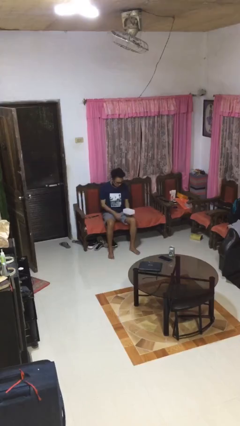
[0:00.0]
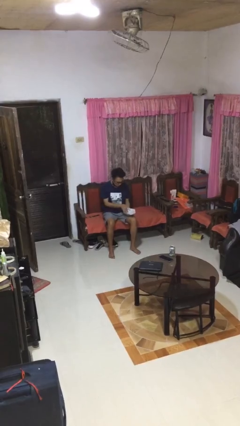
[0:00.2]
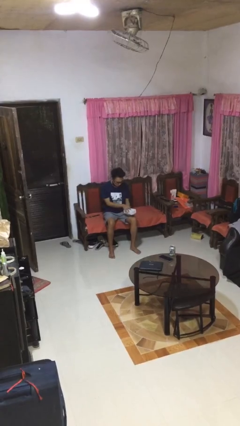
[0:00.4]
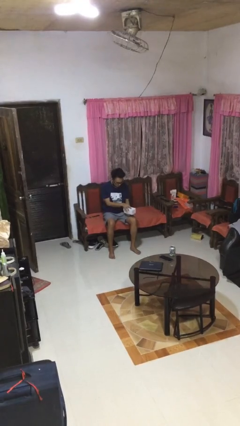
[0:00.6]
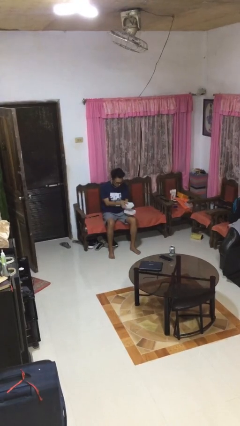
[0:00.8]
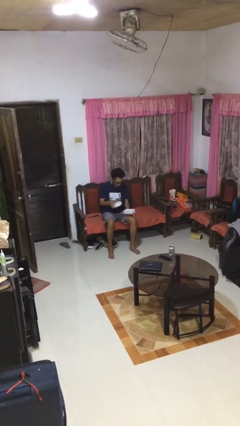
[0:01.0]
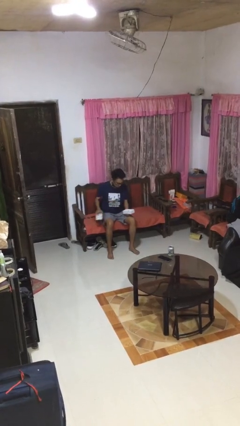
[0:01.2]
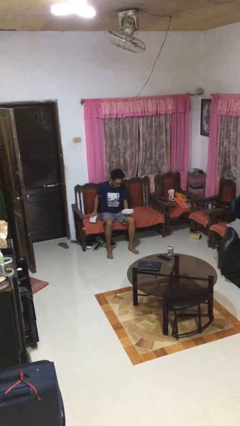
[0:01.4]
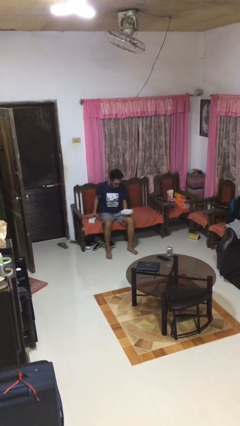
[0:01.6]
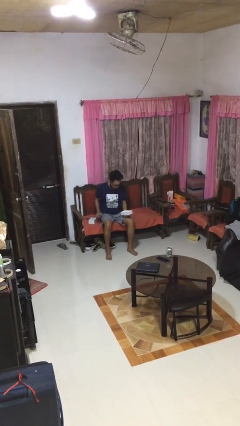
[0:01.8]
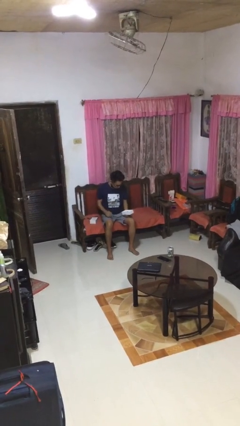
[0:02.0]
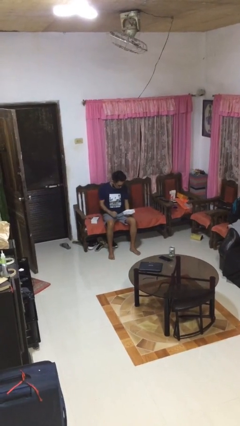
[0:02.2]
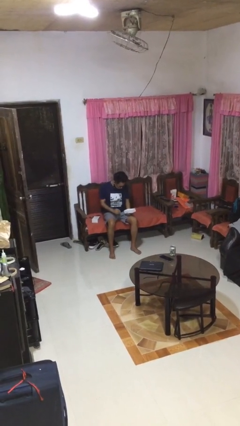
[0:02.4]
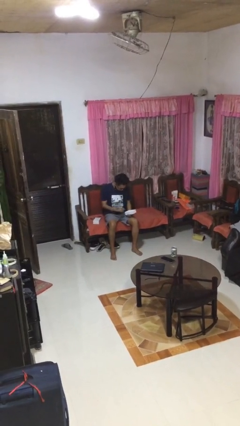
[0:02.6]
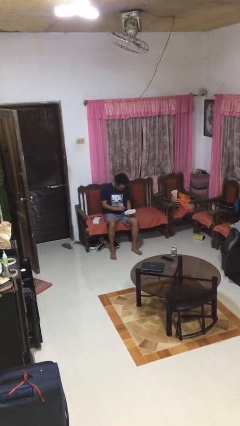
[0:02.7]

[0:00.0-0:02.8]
person opens jewelry box

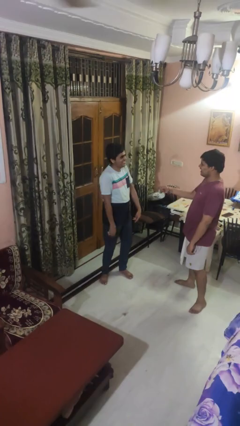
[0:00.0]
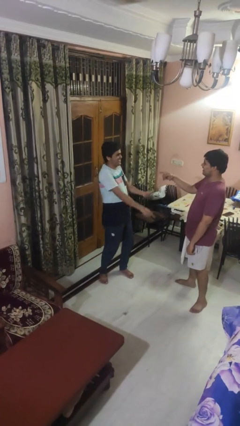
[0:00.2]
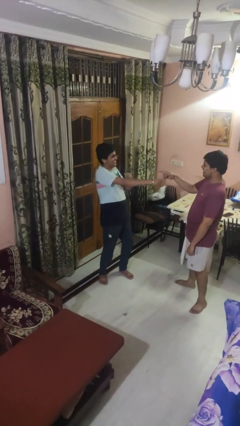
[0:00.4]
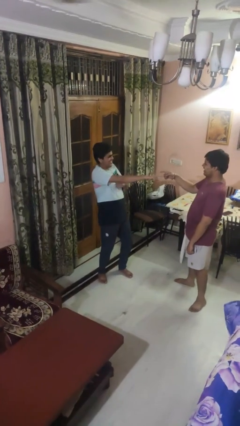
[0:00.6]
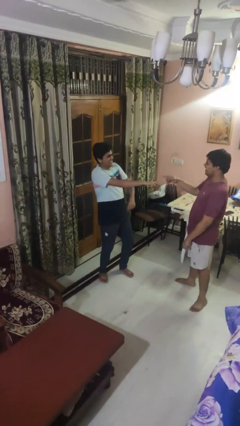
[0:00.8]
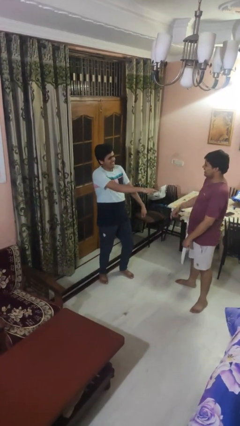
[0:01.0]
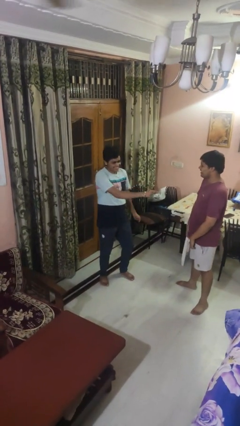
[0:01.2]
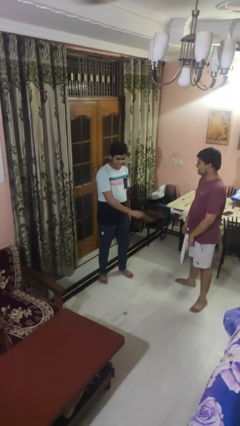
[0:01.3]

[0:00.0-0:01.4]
person laughs with person

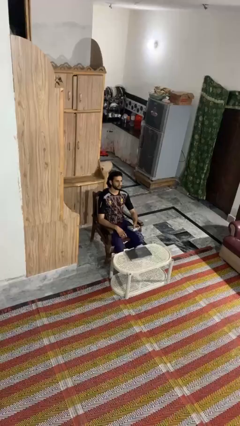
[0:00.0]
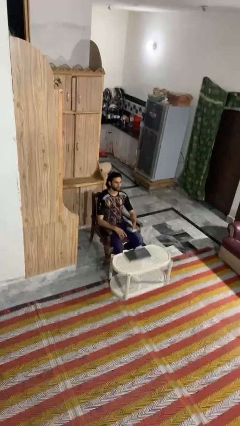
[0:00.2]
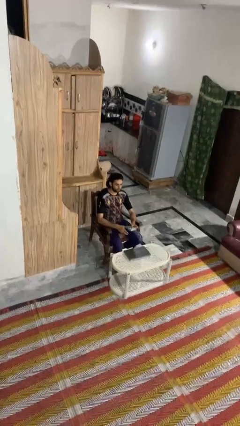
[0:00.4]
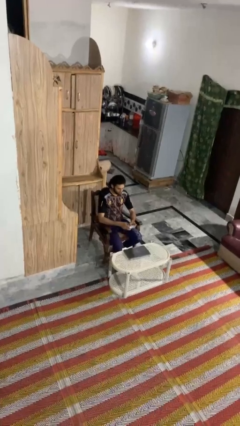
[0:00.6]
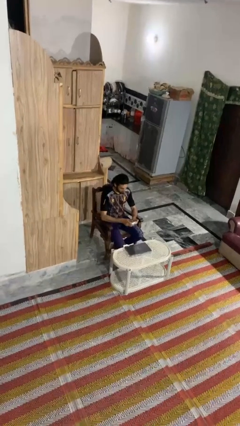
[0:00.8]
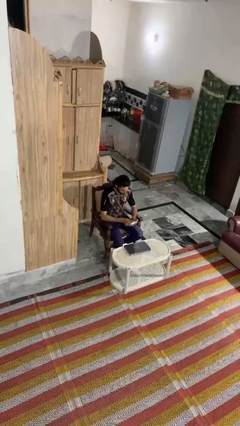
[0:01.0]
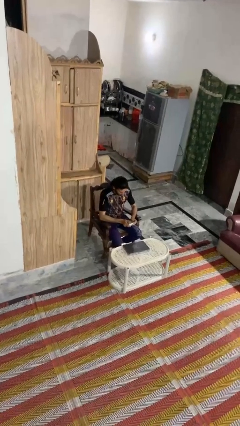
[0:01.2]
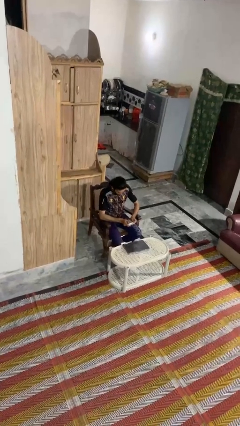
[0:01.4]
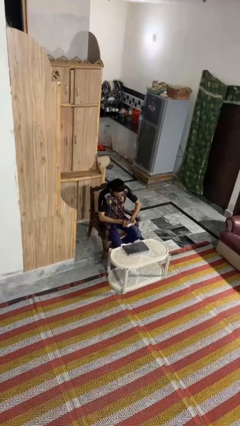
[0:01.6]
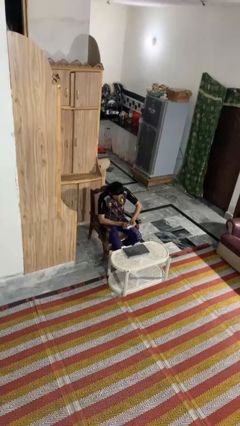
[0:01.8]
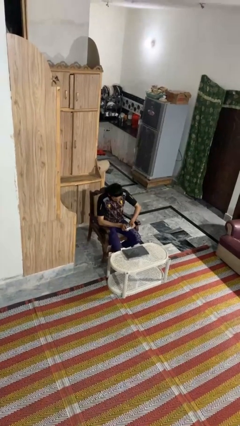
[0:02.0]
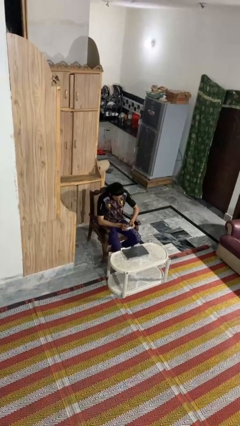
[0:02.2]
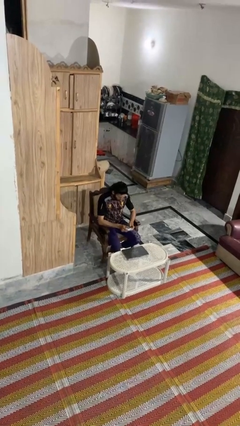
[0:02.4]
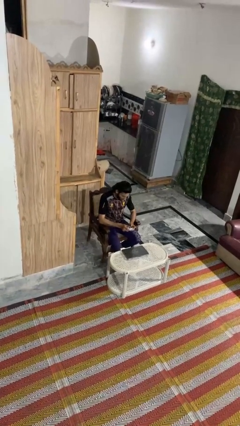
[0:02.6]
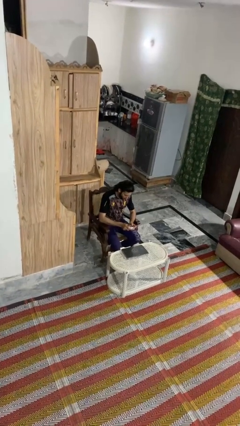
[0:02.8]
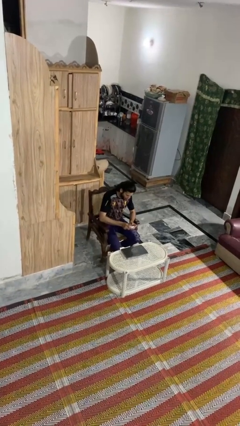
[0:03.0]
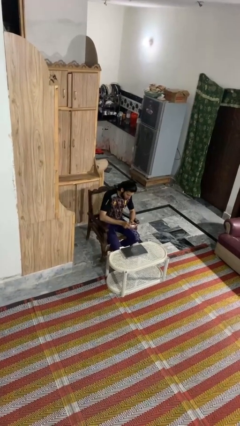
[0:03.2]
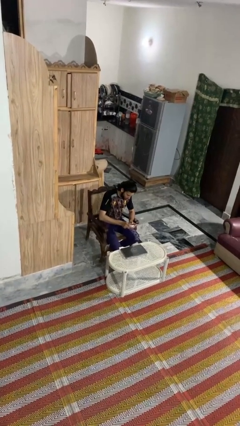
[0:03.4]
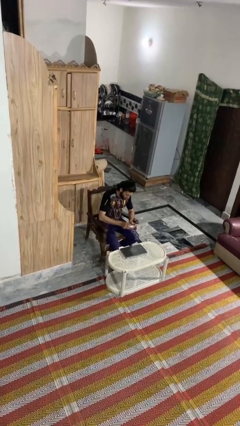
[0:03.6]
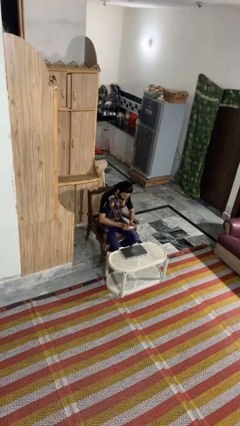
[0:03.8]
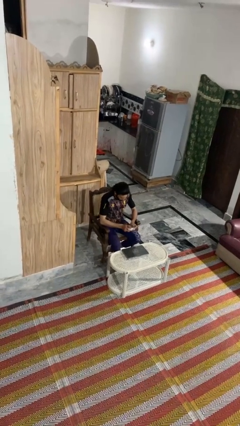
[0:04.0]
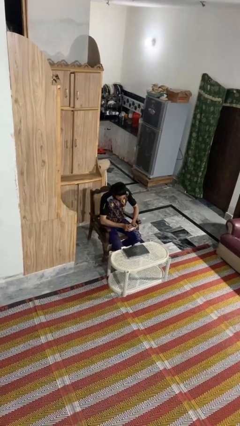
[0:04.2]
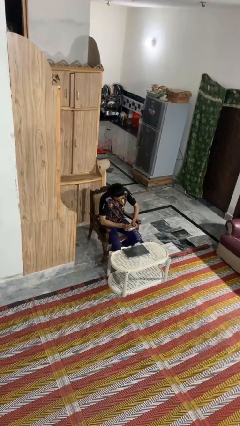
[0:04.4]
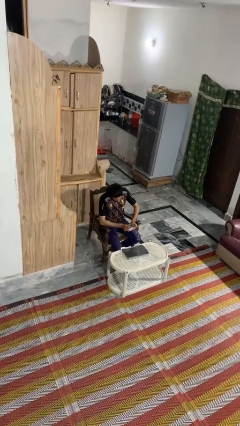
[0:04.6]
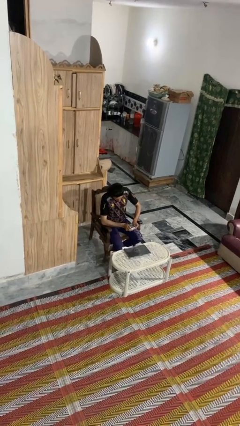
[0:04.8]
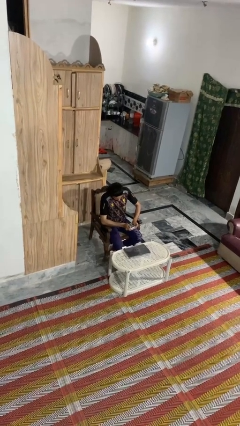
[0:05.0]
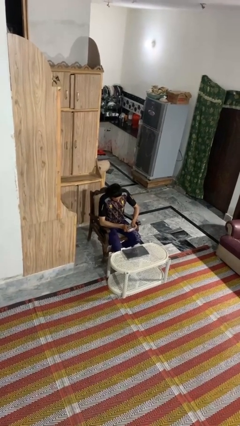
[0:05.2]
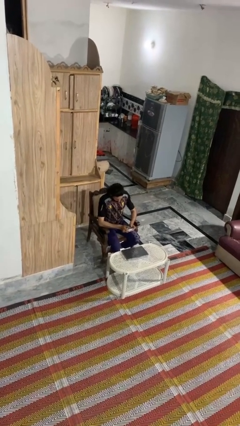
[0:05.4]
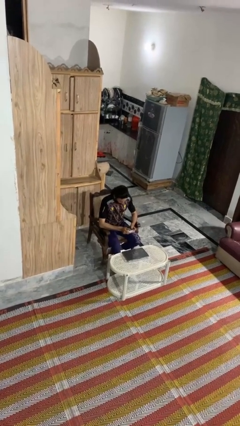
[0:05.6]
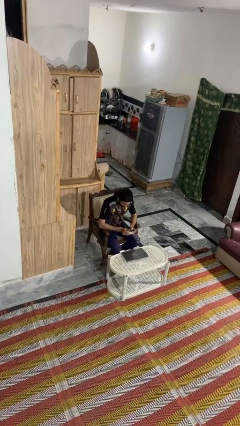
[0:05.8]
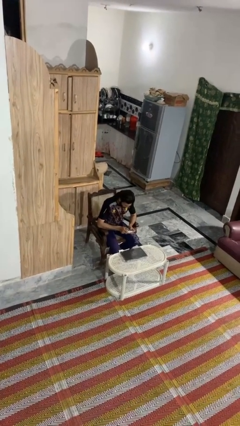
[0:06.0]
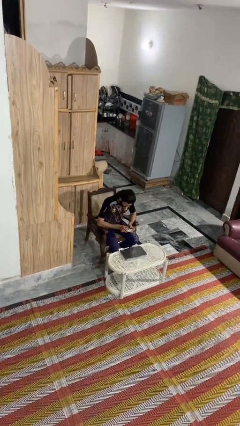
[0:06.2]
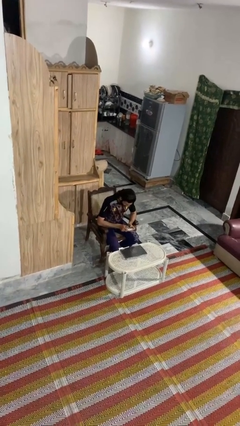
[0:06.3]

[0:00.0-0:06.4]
person interacts with handheld game

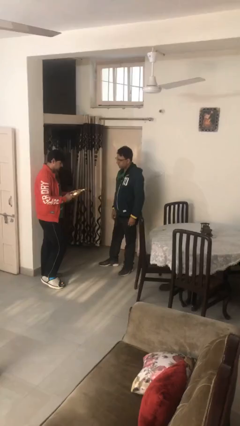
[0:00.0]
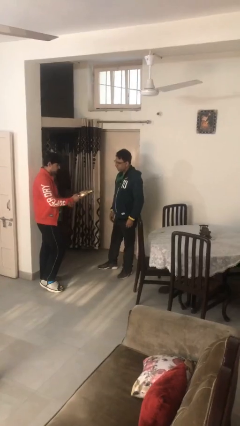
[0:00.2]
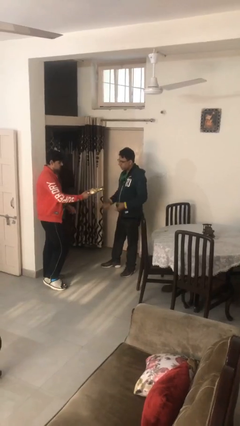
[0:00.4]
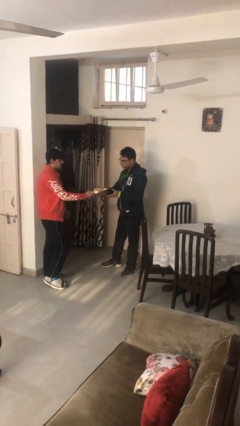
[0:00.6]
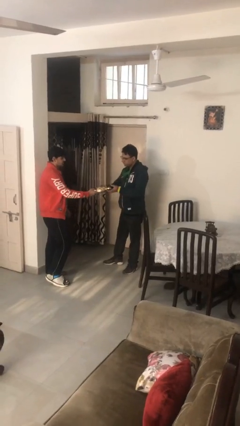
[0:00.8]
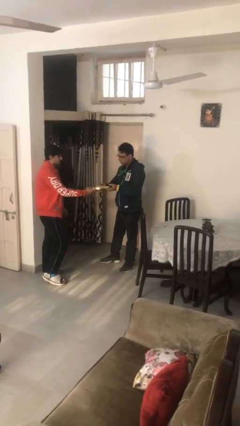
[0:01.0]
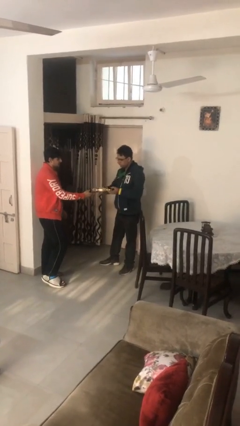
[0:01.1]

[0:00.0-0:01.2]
person transfers object to person

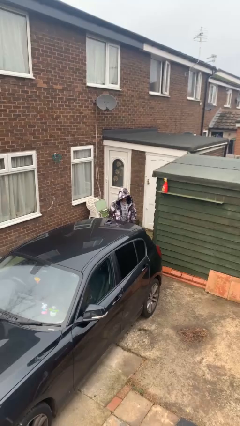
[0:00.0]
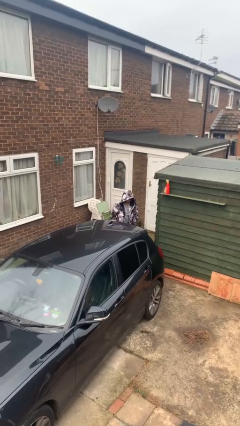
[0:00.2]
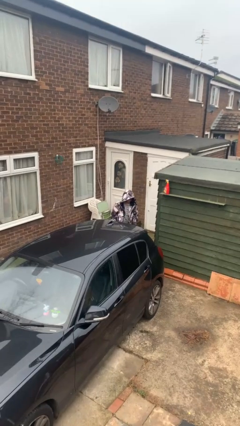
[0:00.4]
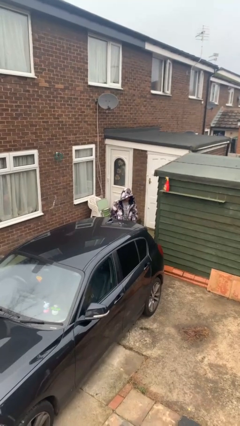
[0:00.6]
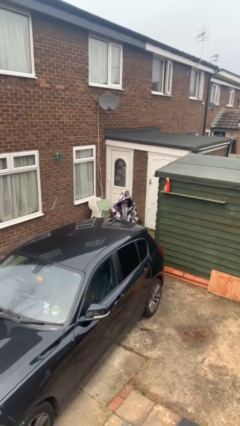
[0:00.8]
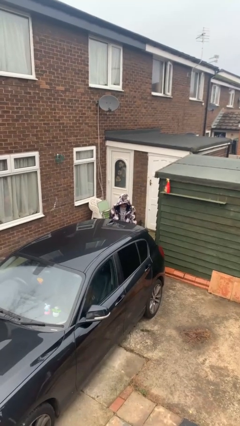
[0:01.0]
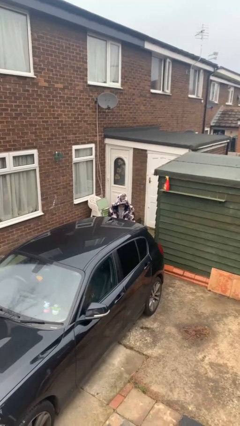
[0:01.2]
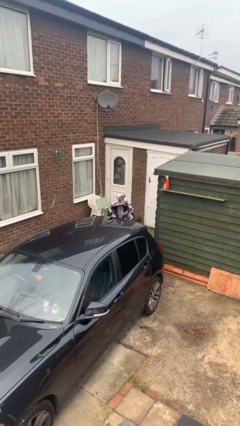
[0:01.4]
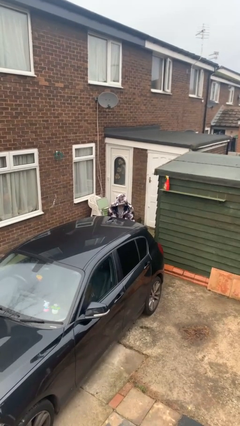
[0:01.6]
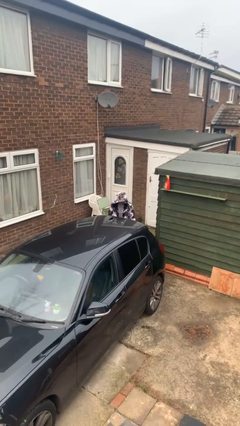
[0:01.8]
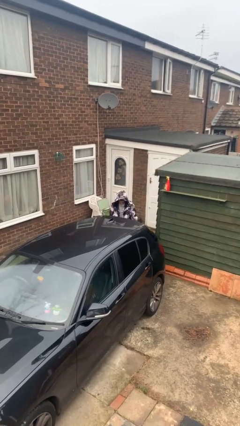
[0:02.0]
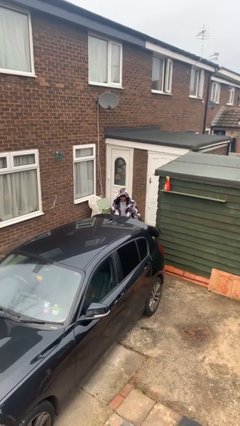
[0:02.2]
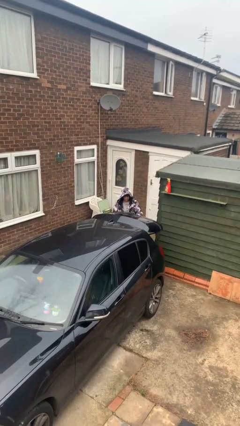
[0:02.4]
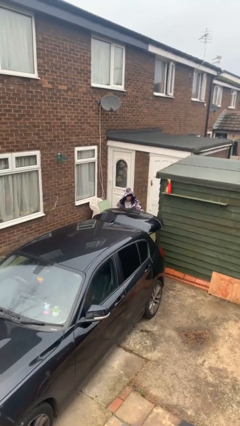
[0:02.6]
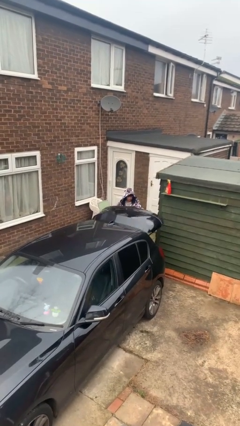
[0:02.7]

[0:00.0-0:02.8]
person opens car trunk

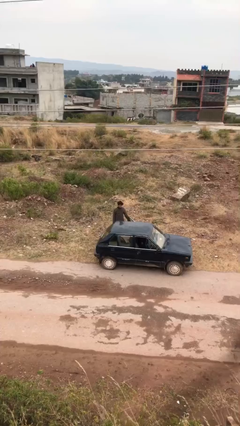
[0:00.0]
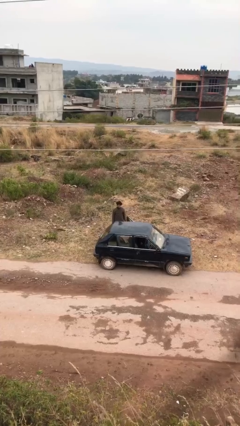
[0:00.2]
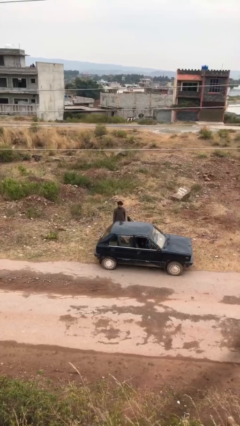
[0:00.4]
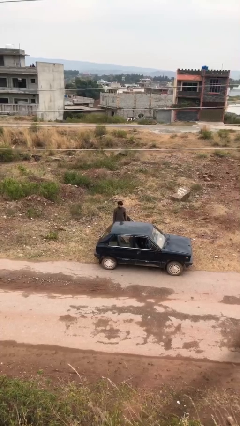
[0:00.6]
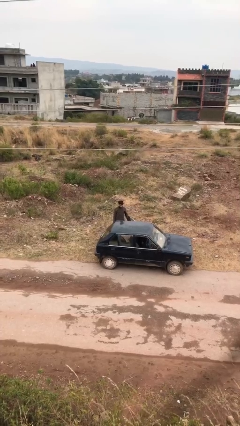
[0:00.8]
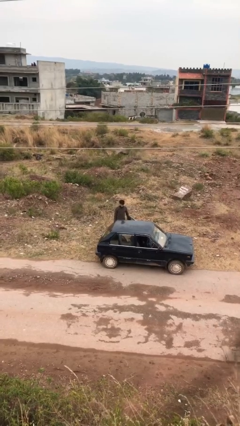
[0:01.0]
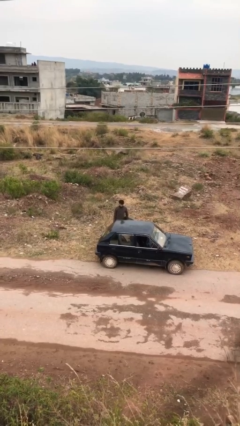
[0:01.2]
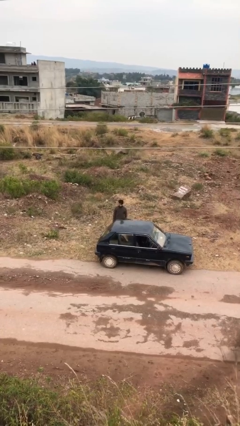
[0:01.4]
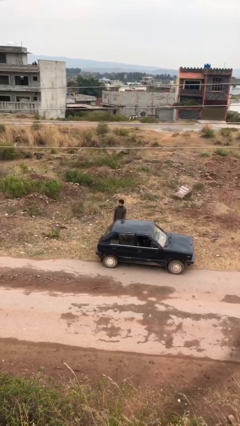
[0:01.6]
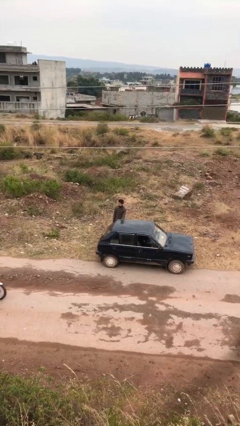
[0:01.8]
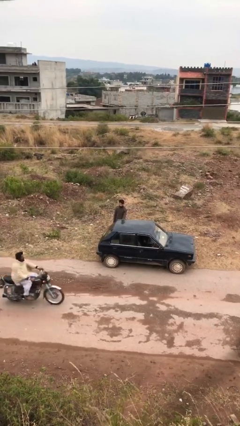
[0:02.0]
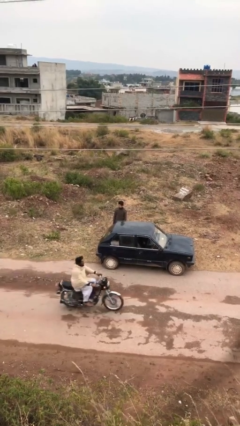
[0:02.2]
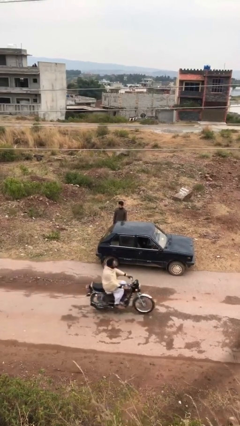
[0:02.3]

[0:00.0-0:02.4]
person closes car door

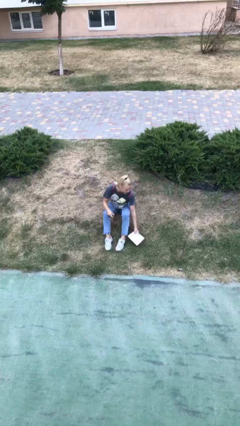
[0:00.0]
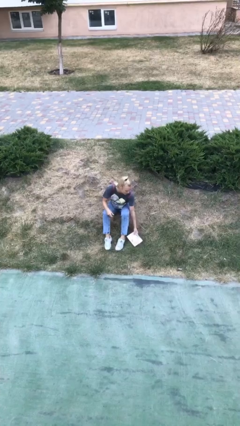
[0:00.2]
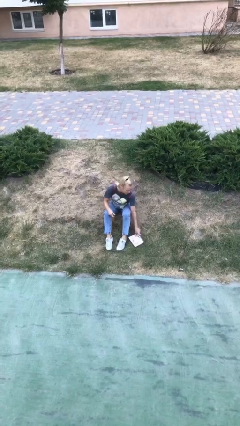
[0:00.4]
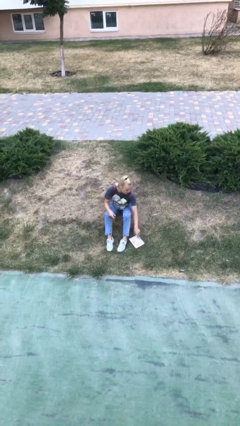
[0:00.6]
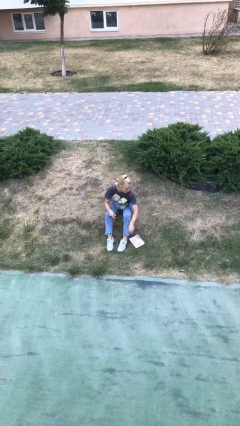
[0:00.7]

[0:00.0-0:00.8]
person puts down object on floor
